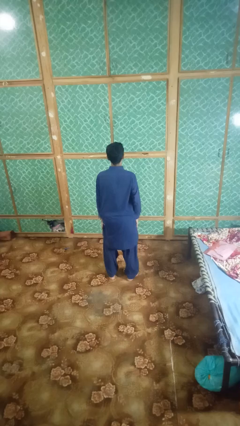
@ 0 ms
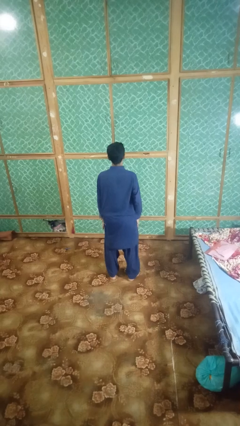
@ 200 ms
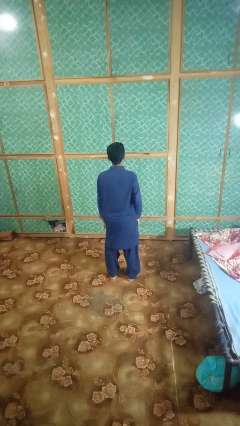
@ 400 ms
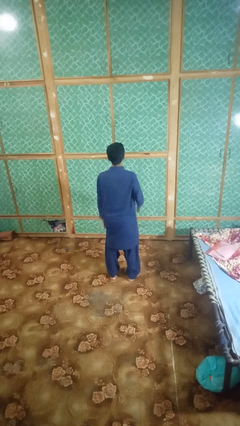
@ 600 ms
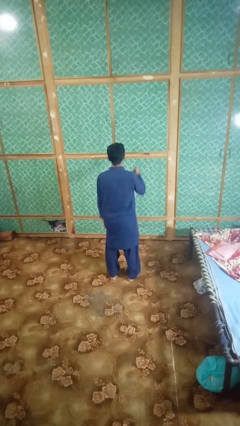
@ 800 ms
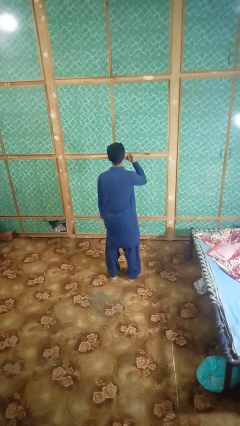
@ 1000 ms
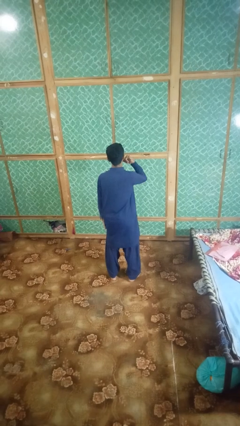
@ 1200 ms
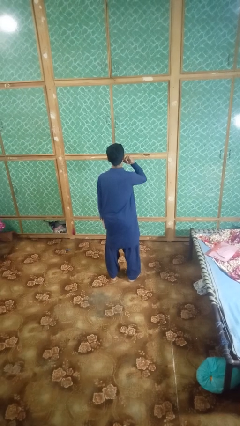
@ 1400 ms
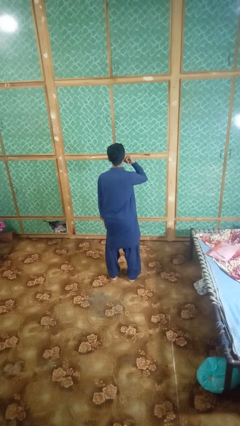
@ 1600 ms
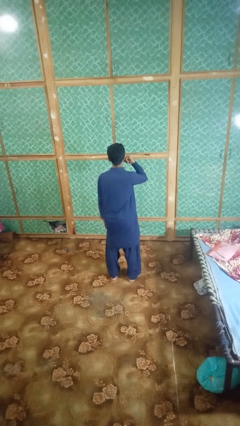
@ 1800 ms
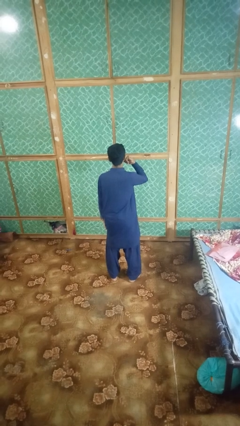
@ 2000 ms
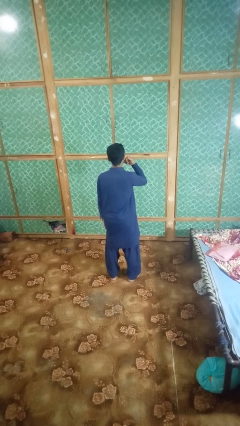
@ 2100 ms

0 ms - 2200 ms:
person gestures call me

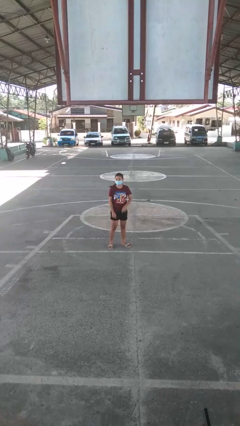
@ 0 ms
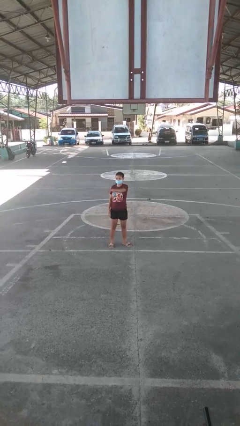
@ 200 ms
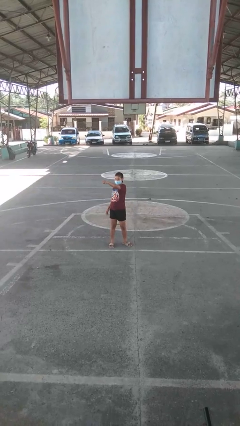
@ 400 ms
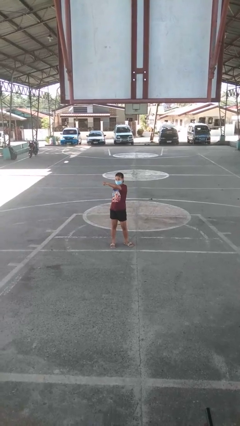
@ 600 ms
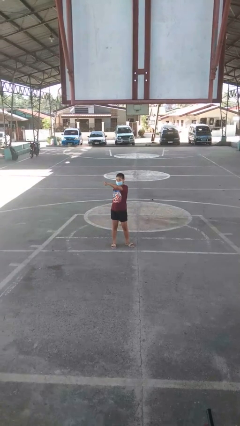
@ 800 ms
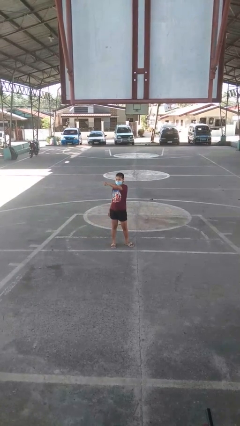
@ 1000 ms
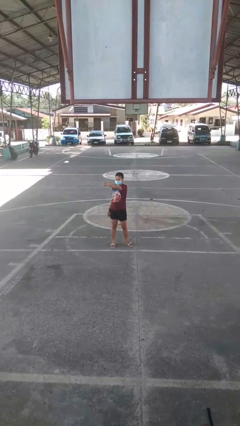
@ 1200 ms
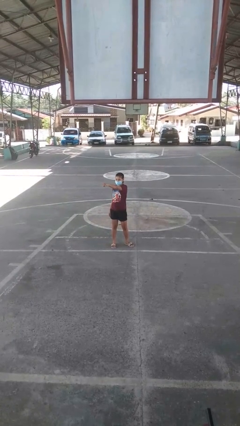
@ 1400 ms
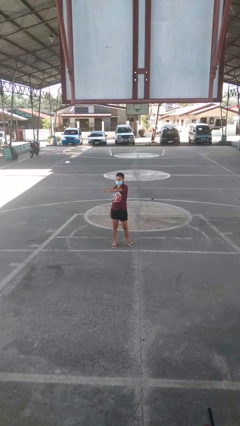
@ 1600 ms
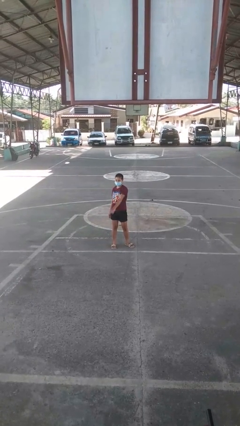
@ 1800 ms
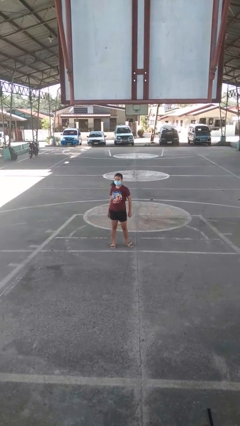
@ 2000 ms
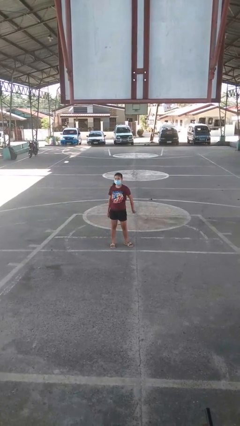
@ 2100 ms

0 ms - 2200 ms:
person points at person

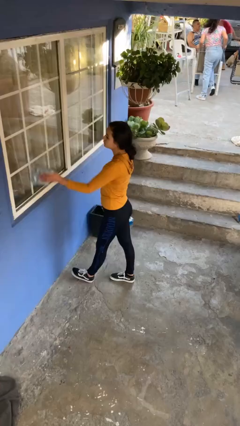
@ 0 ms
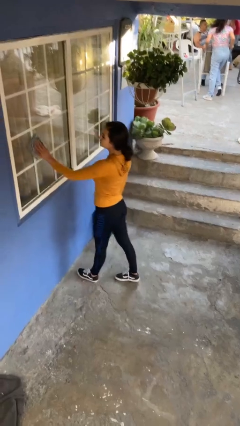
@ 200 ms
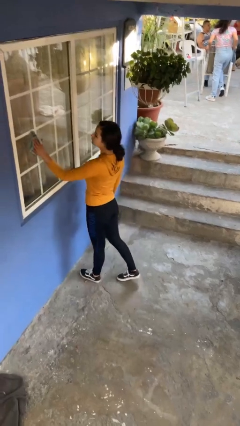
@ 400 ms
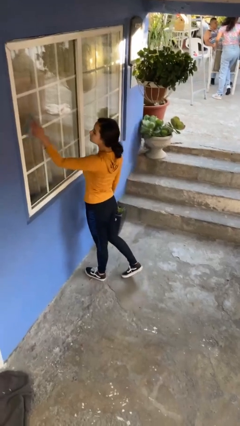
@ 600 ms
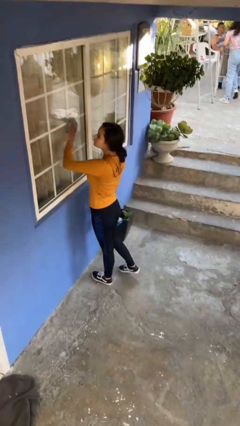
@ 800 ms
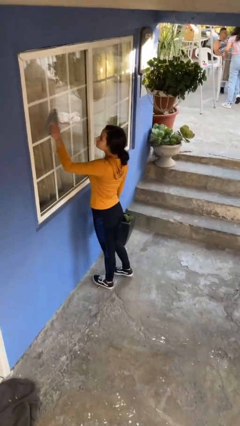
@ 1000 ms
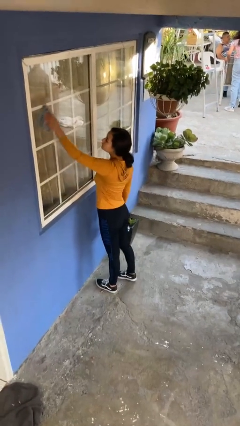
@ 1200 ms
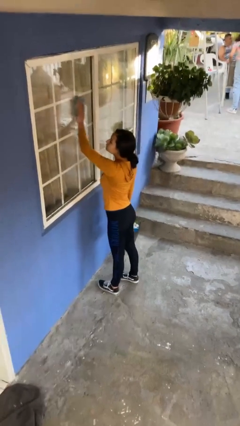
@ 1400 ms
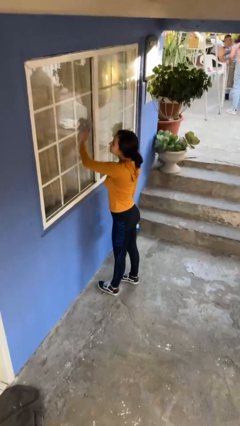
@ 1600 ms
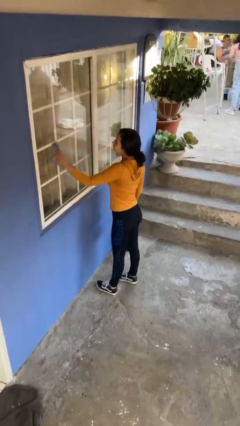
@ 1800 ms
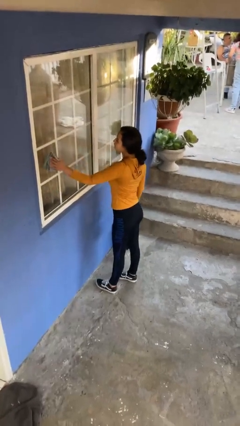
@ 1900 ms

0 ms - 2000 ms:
person washes window

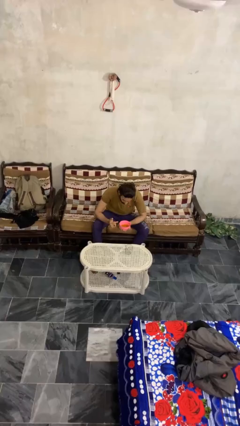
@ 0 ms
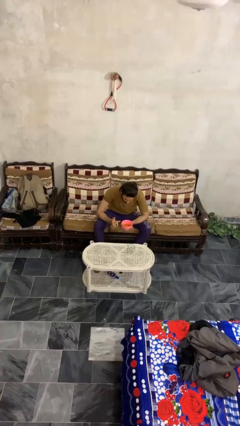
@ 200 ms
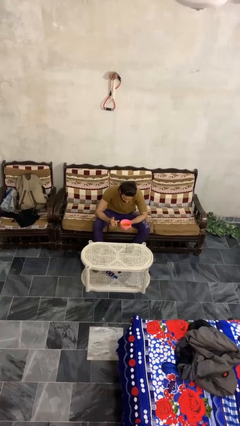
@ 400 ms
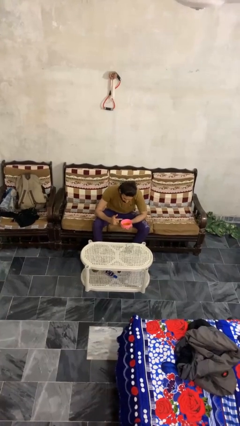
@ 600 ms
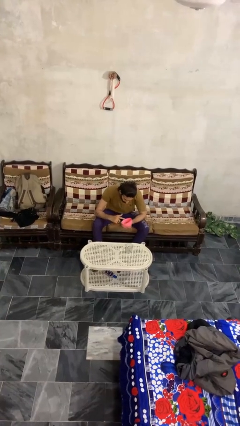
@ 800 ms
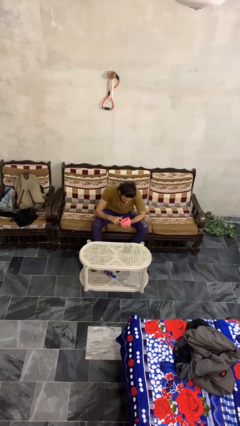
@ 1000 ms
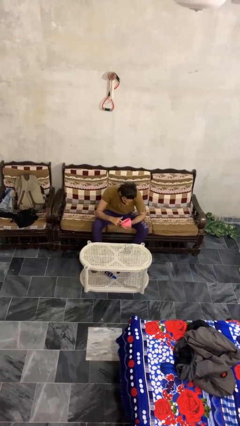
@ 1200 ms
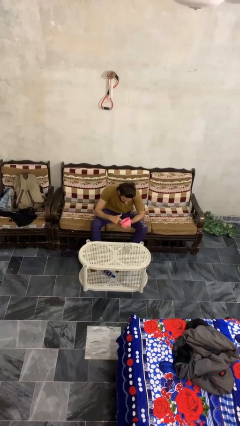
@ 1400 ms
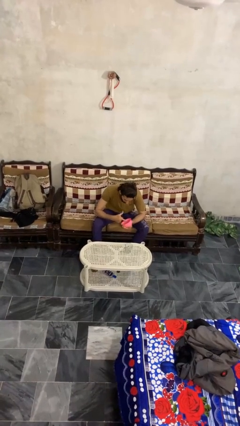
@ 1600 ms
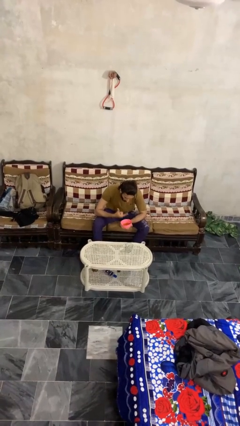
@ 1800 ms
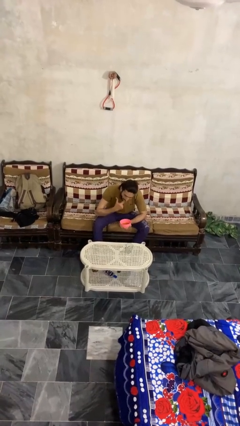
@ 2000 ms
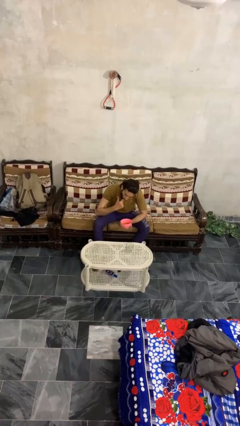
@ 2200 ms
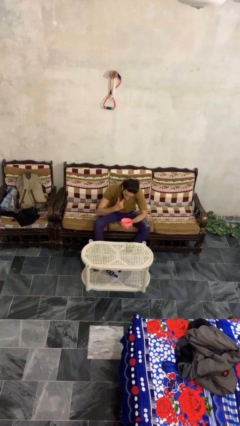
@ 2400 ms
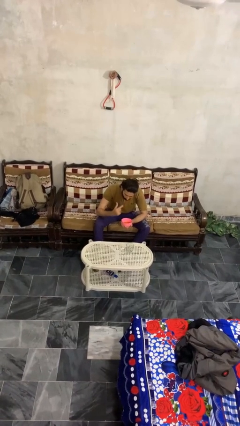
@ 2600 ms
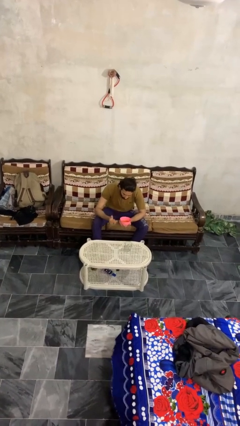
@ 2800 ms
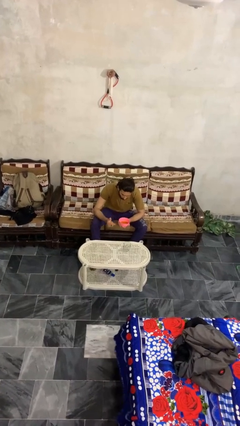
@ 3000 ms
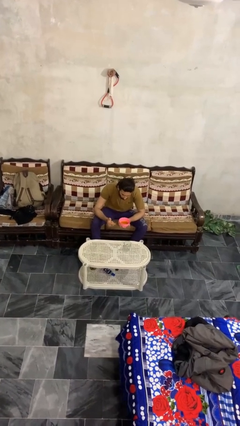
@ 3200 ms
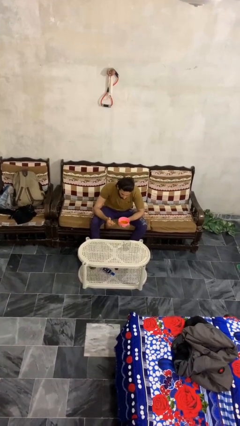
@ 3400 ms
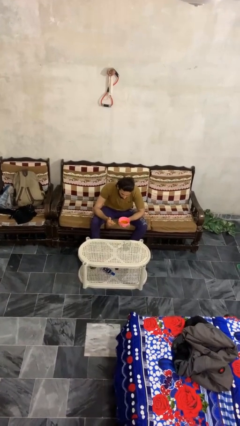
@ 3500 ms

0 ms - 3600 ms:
person eats with hands

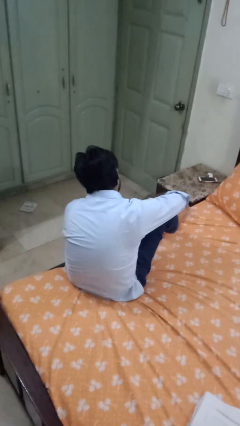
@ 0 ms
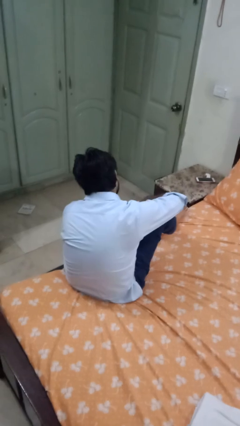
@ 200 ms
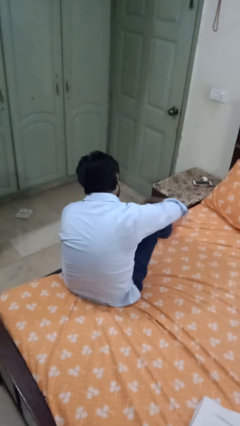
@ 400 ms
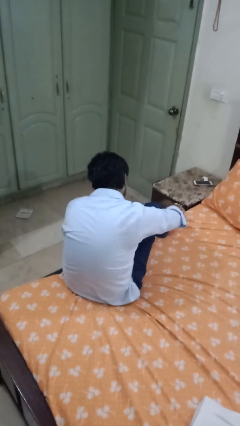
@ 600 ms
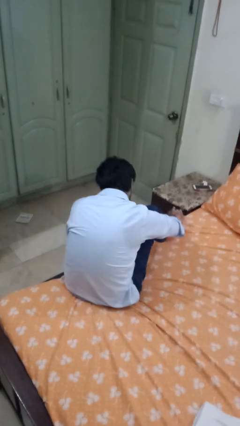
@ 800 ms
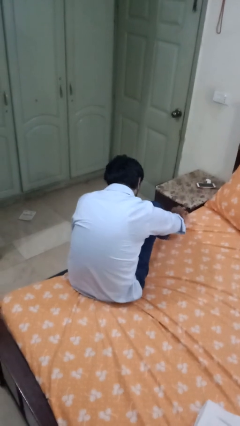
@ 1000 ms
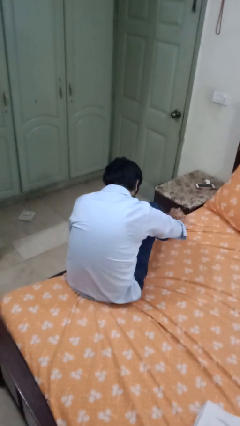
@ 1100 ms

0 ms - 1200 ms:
person rubs foot

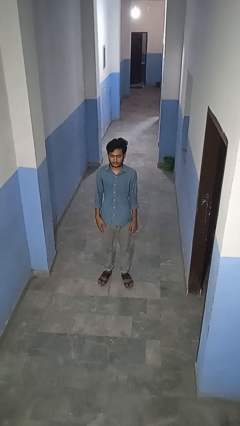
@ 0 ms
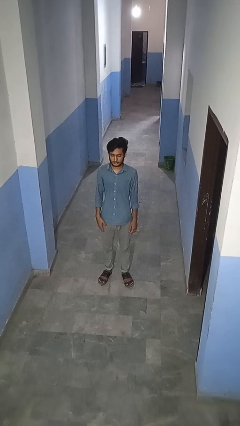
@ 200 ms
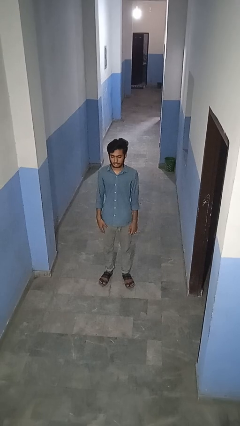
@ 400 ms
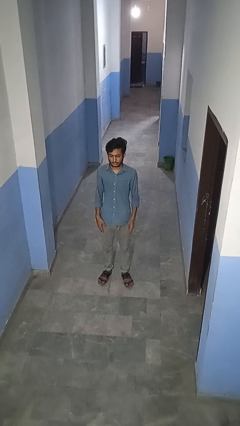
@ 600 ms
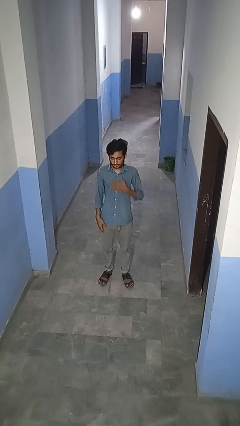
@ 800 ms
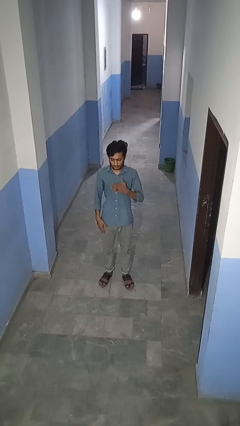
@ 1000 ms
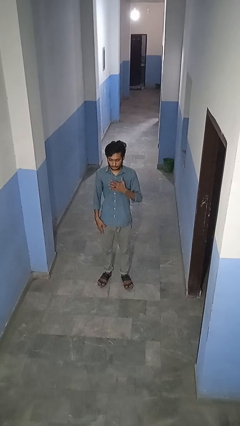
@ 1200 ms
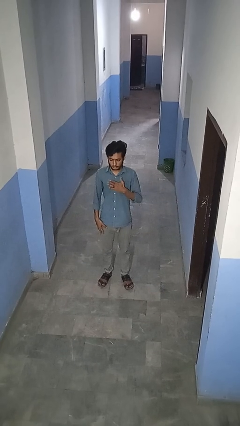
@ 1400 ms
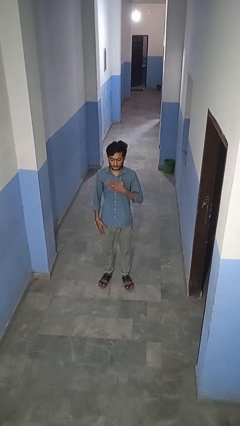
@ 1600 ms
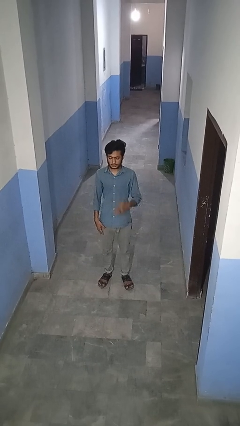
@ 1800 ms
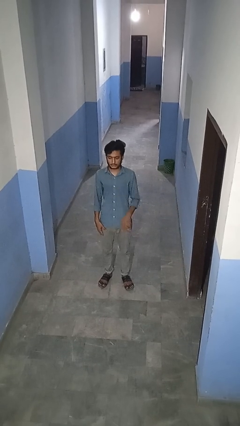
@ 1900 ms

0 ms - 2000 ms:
person drums on chest

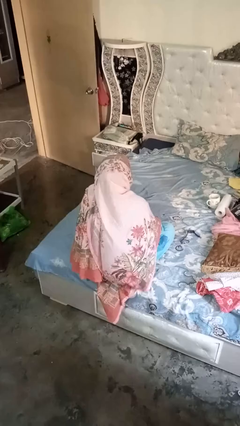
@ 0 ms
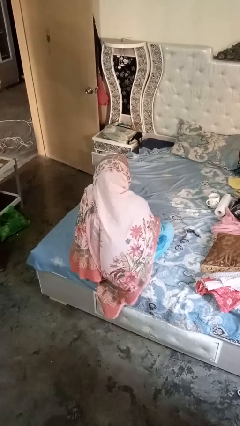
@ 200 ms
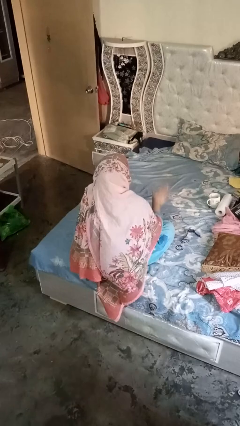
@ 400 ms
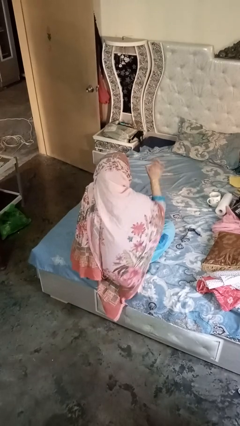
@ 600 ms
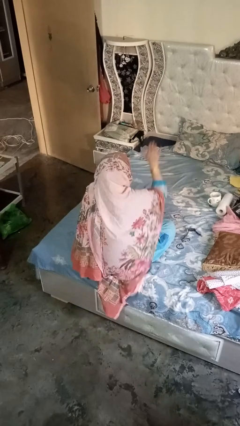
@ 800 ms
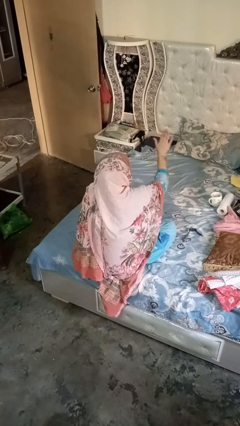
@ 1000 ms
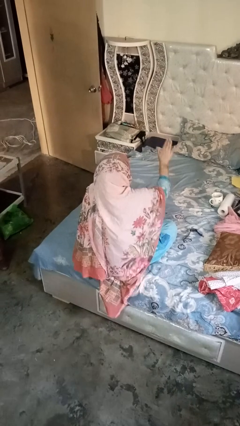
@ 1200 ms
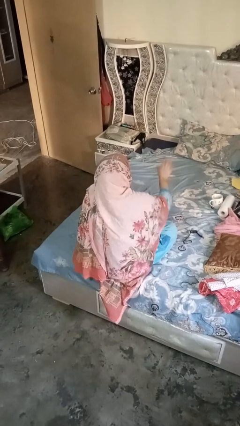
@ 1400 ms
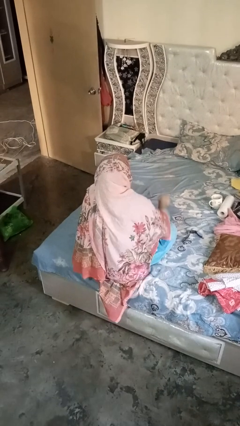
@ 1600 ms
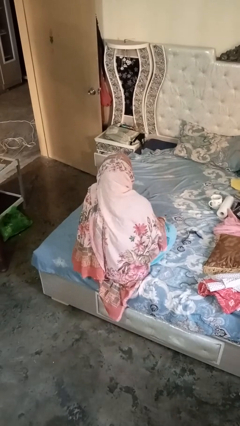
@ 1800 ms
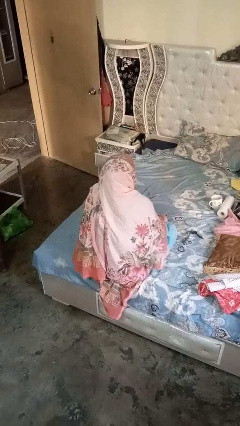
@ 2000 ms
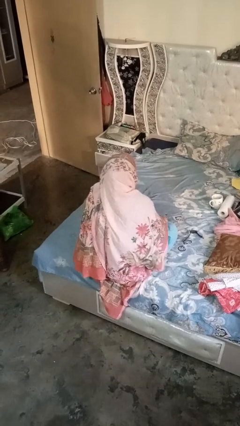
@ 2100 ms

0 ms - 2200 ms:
person gestures stop

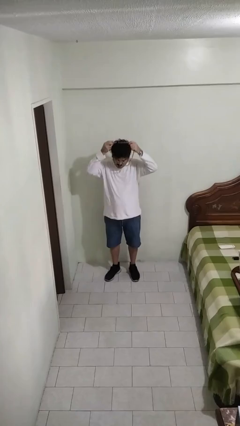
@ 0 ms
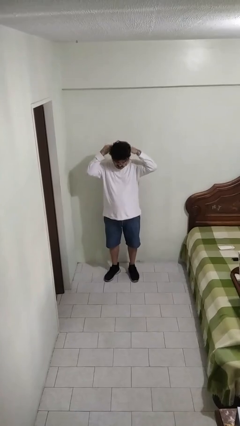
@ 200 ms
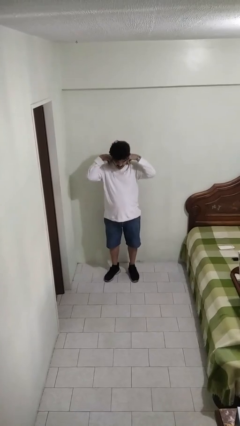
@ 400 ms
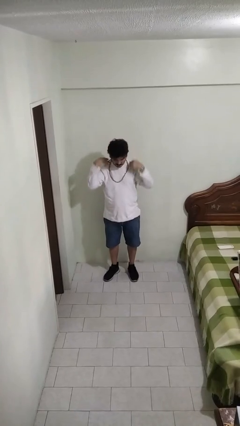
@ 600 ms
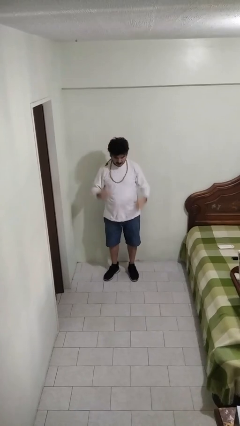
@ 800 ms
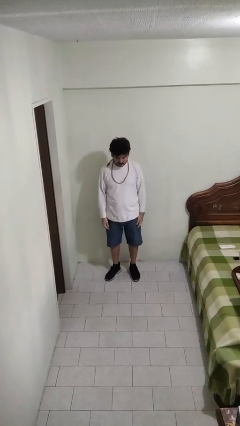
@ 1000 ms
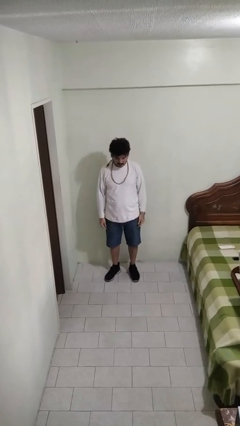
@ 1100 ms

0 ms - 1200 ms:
person puts on necklace

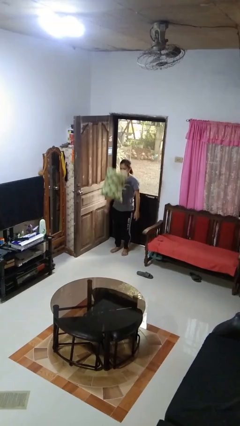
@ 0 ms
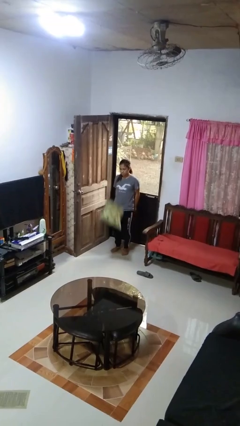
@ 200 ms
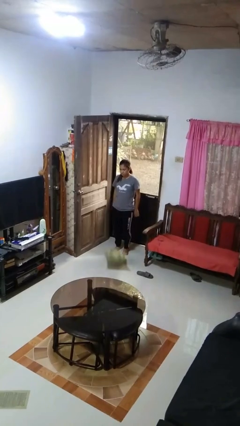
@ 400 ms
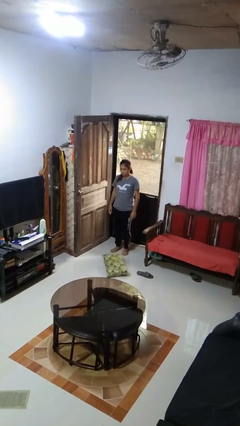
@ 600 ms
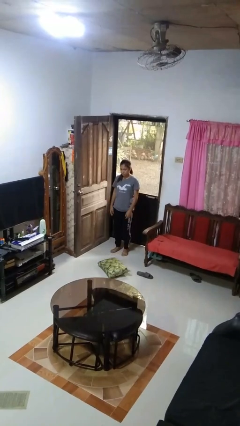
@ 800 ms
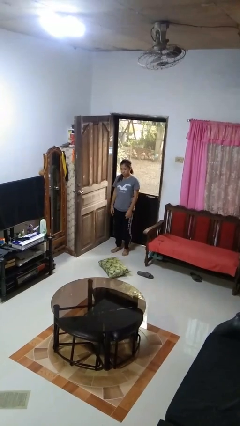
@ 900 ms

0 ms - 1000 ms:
person throws object into air
